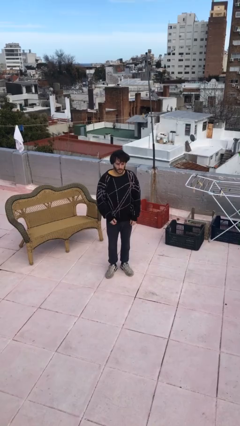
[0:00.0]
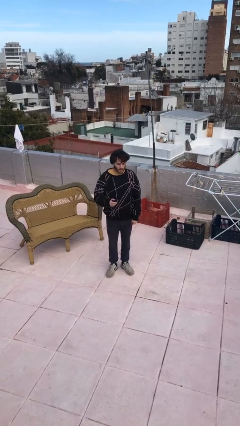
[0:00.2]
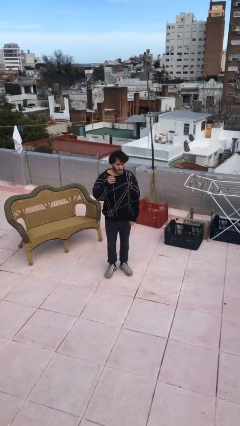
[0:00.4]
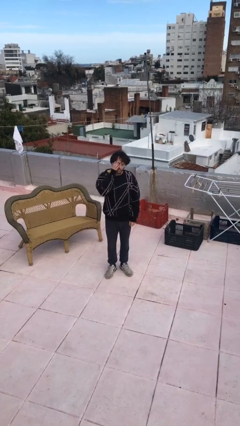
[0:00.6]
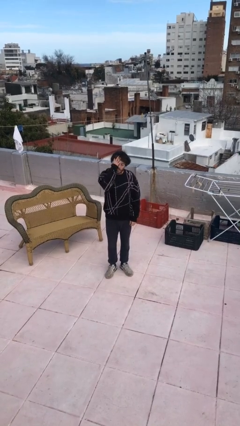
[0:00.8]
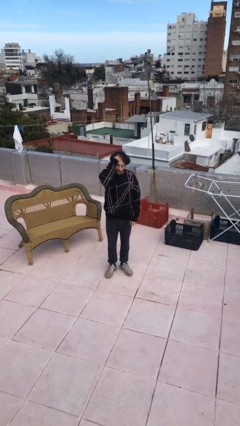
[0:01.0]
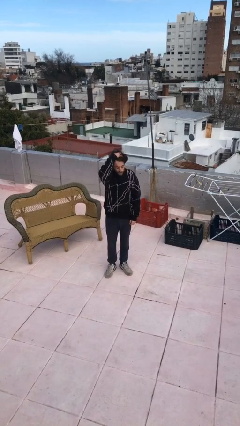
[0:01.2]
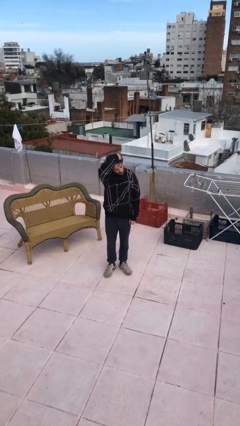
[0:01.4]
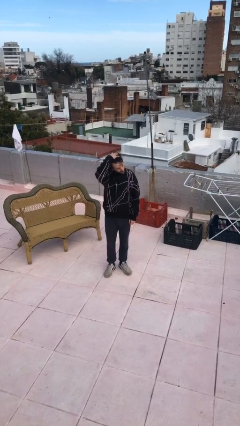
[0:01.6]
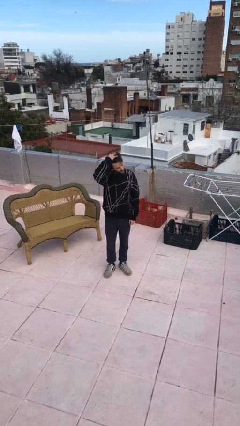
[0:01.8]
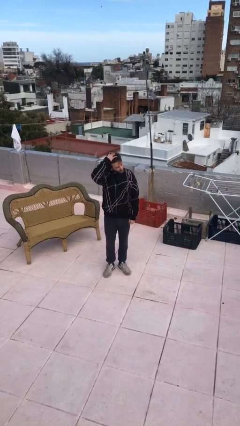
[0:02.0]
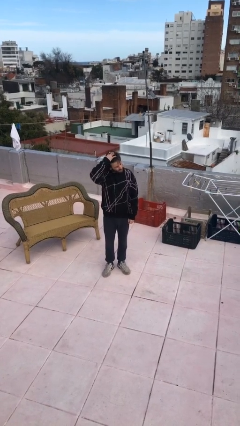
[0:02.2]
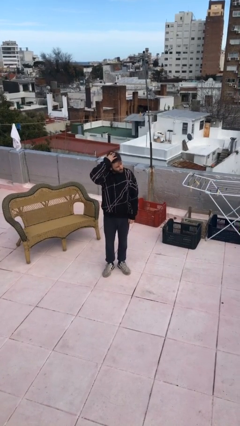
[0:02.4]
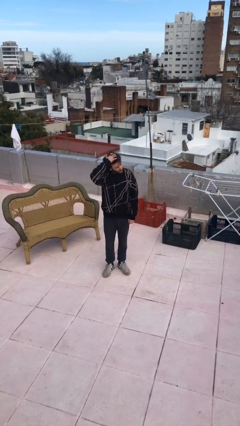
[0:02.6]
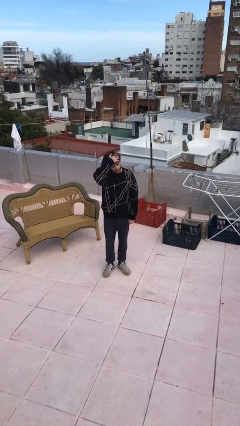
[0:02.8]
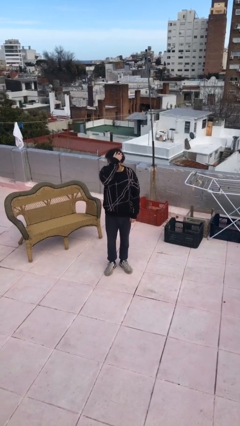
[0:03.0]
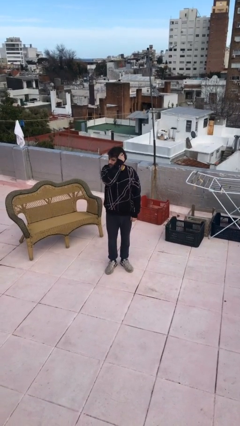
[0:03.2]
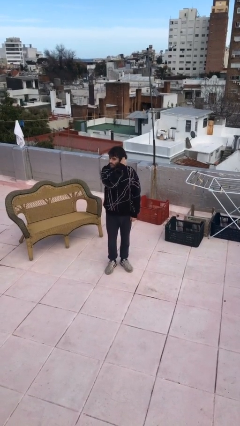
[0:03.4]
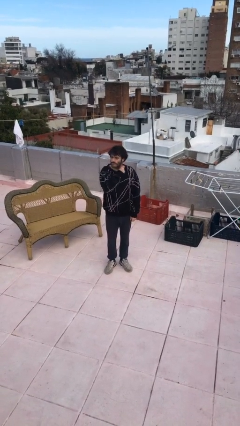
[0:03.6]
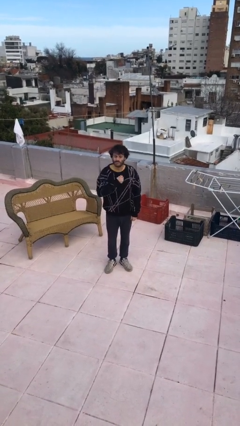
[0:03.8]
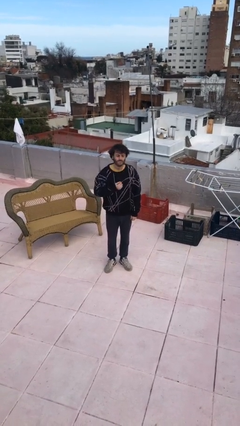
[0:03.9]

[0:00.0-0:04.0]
person scratches face

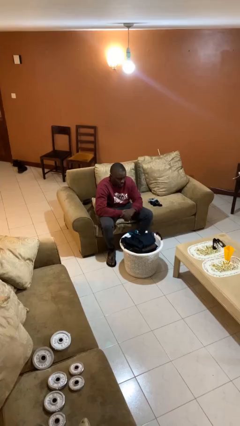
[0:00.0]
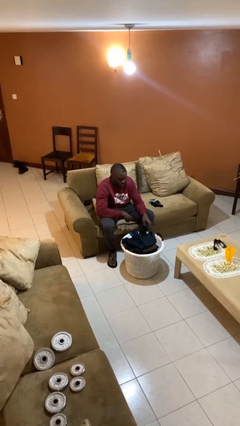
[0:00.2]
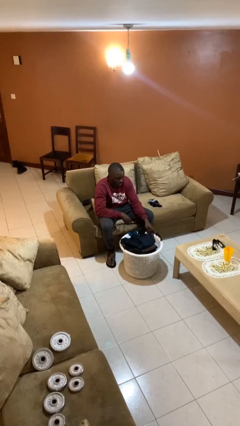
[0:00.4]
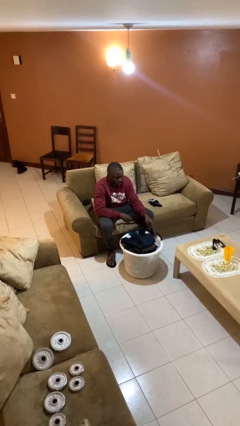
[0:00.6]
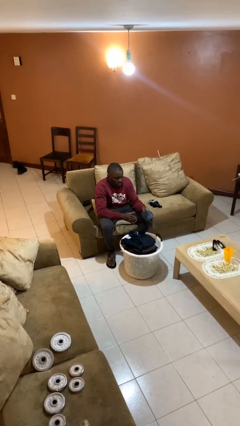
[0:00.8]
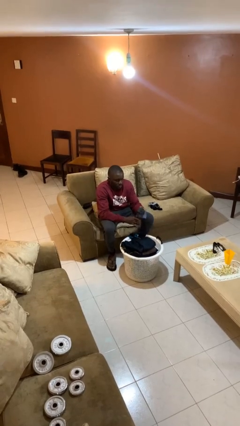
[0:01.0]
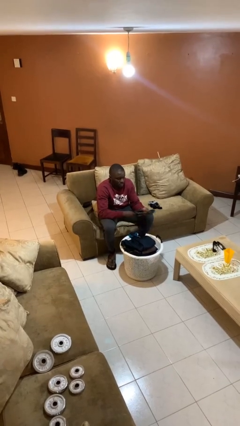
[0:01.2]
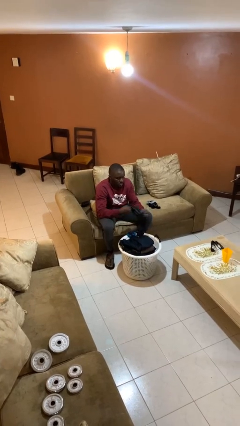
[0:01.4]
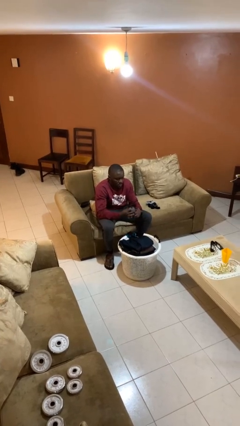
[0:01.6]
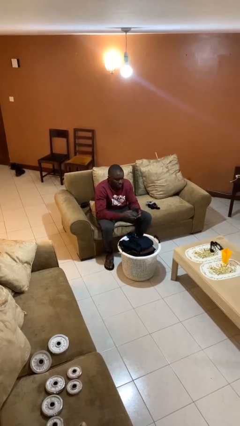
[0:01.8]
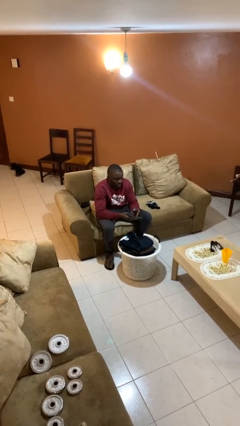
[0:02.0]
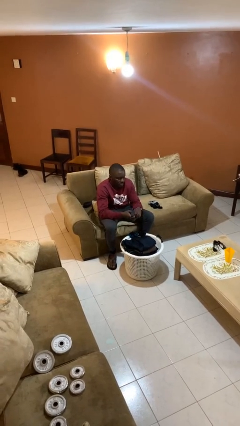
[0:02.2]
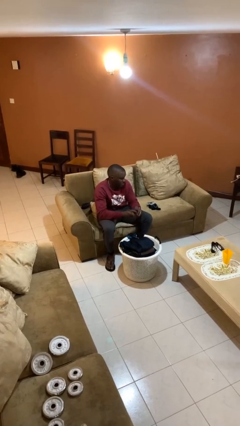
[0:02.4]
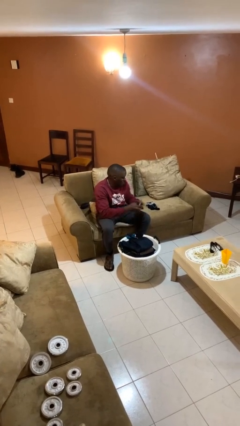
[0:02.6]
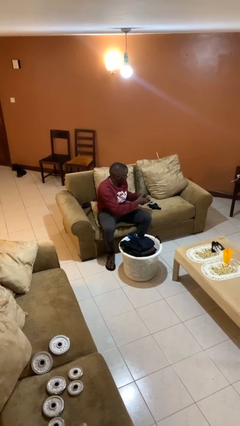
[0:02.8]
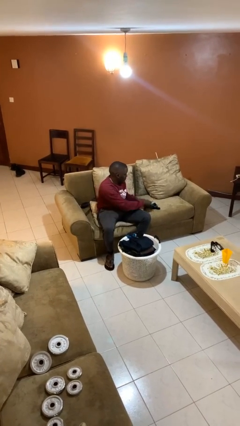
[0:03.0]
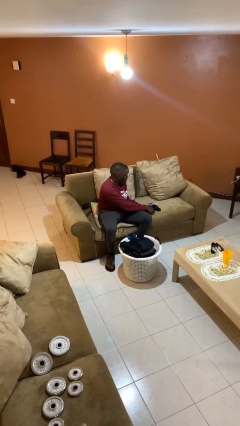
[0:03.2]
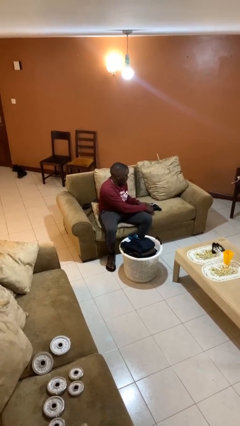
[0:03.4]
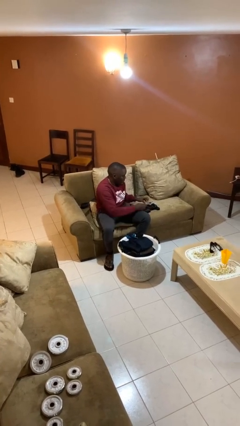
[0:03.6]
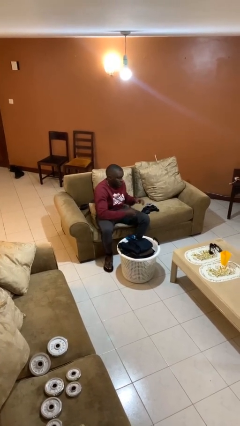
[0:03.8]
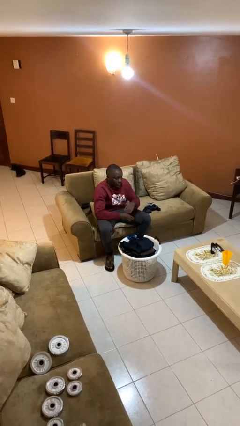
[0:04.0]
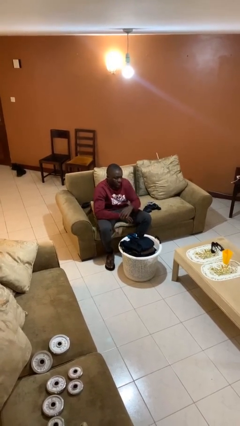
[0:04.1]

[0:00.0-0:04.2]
person folds socks

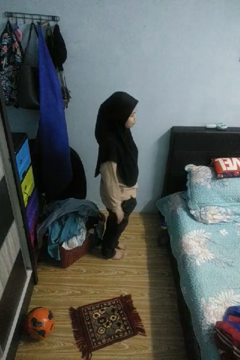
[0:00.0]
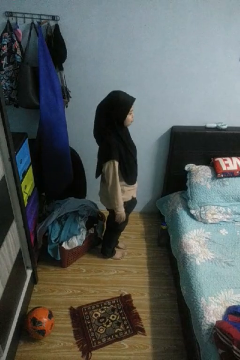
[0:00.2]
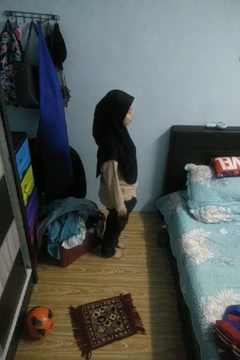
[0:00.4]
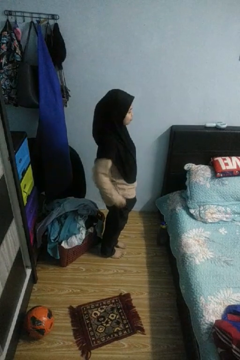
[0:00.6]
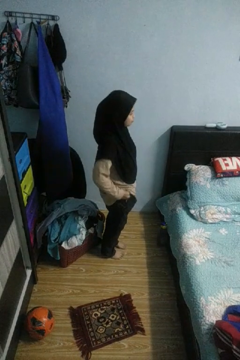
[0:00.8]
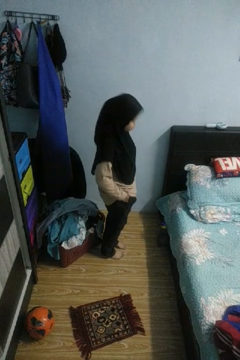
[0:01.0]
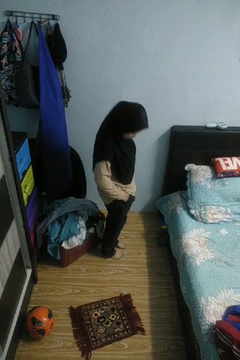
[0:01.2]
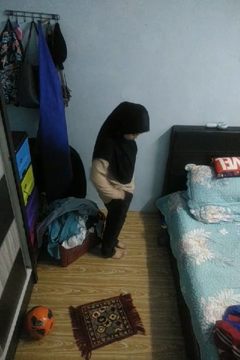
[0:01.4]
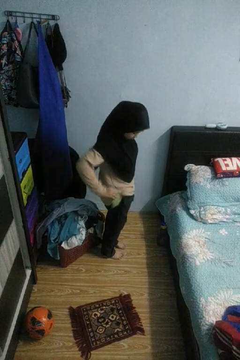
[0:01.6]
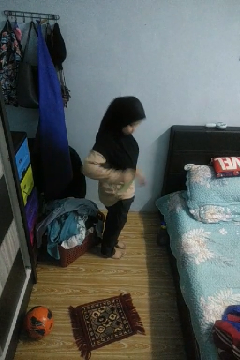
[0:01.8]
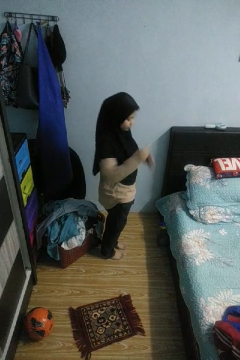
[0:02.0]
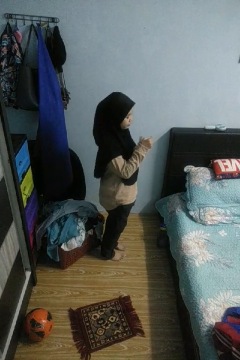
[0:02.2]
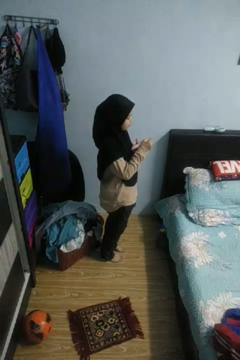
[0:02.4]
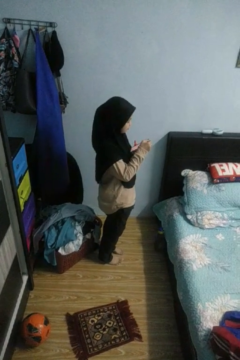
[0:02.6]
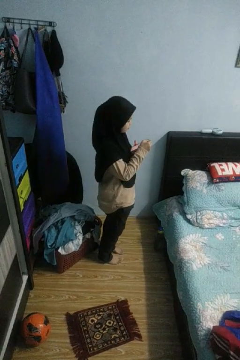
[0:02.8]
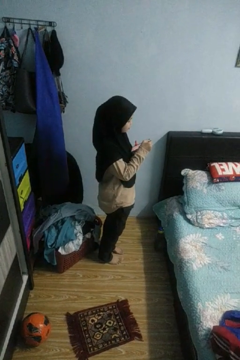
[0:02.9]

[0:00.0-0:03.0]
person takes phone from pocket

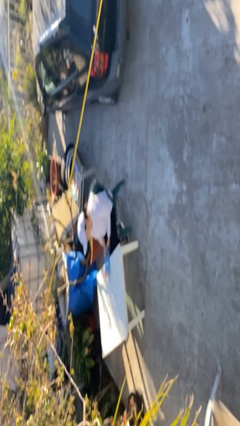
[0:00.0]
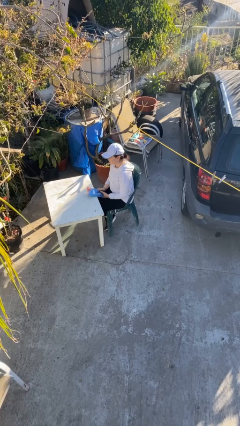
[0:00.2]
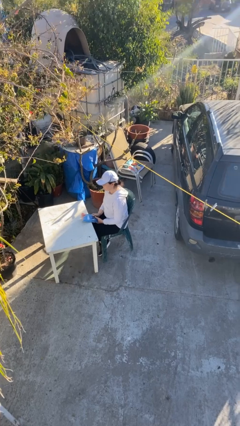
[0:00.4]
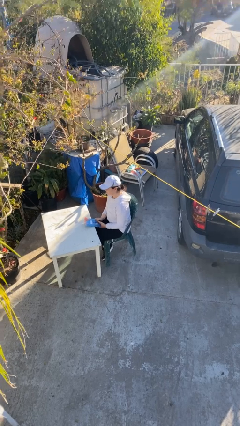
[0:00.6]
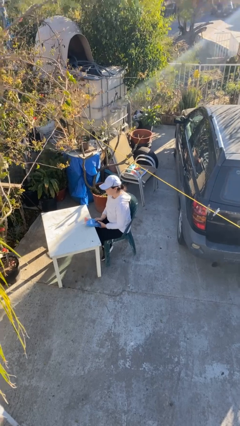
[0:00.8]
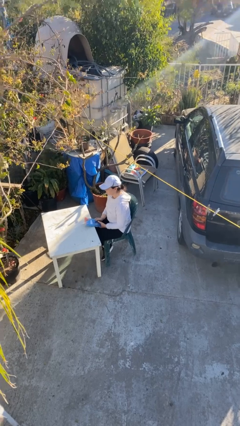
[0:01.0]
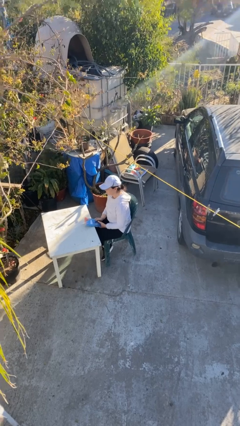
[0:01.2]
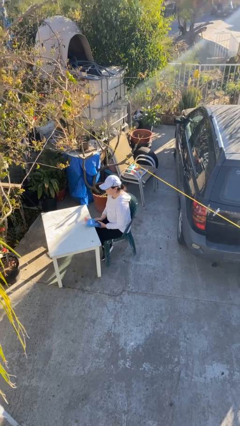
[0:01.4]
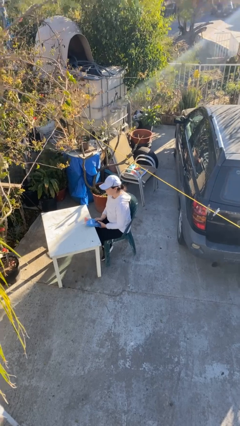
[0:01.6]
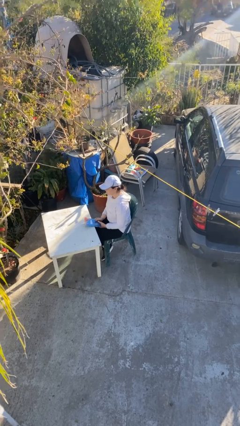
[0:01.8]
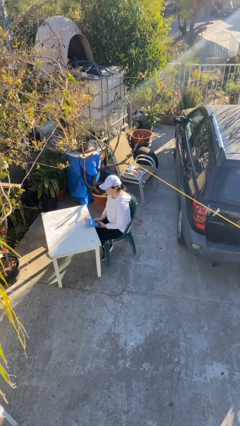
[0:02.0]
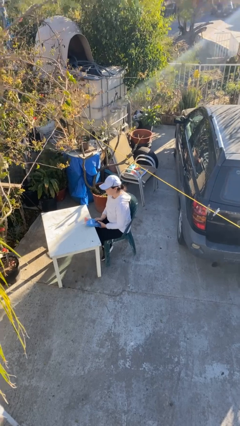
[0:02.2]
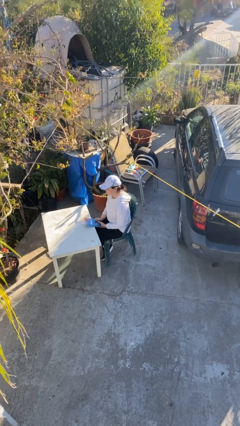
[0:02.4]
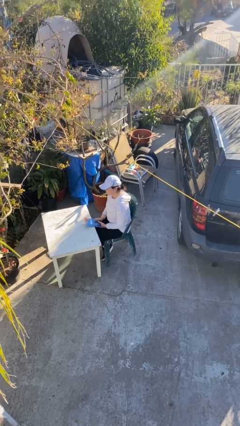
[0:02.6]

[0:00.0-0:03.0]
person reads document

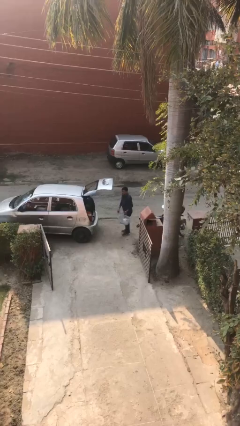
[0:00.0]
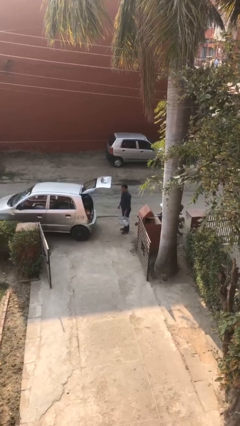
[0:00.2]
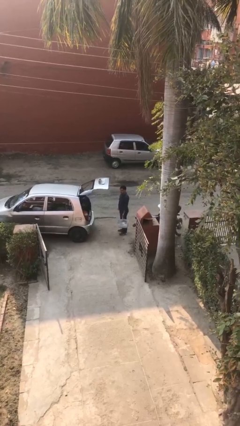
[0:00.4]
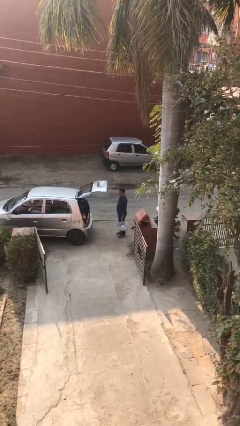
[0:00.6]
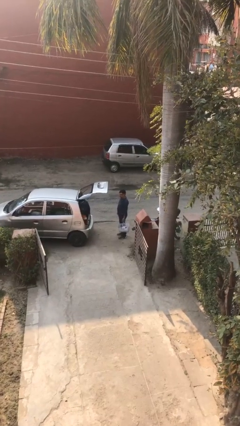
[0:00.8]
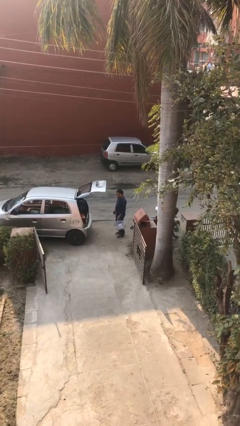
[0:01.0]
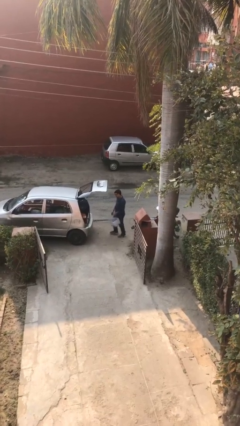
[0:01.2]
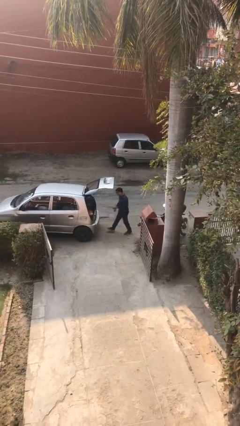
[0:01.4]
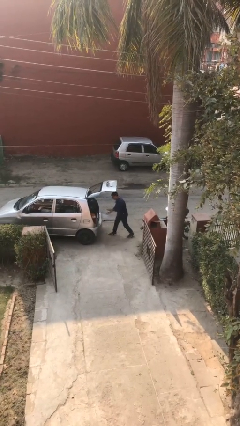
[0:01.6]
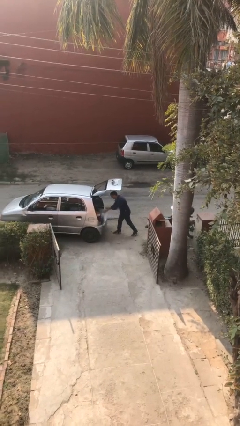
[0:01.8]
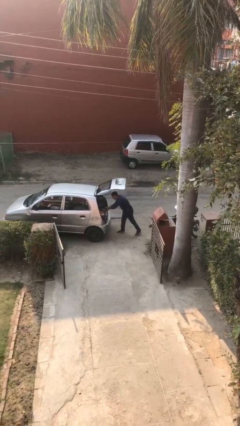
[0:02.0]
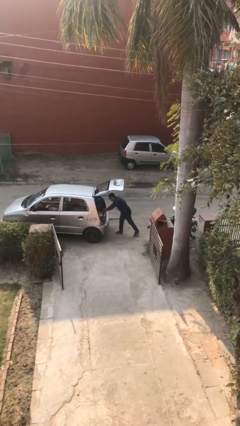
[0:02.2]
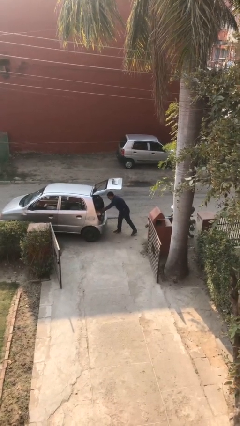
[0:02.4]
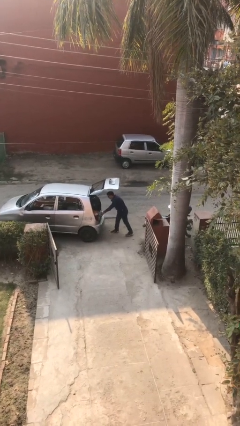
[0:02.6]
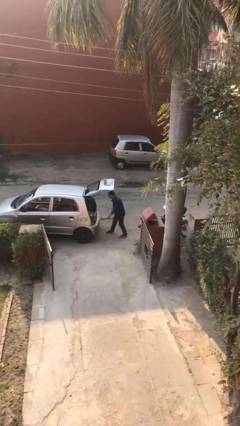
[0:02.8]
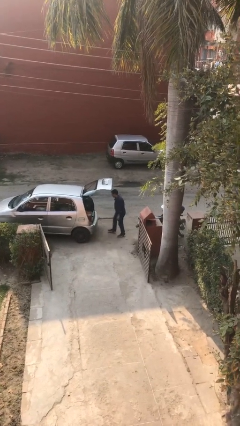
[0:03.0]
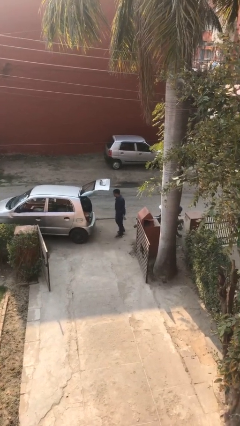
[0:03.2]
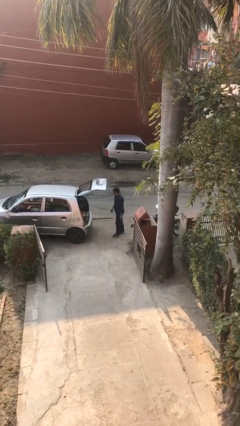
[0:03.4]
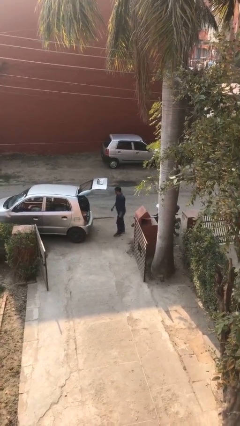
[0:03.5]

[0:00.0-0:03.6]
person loads car

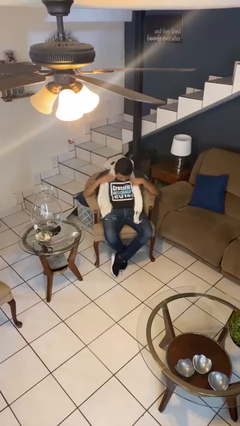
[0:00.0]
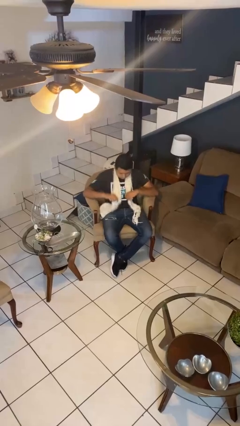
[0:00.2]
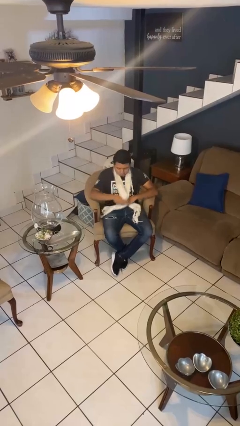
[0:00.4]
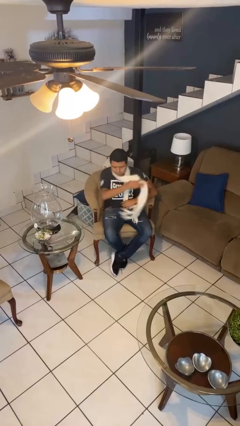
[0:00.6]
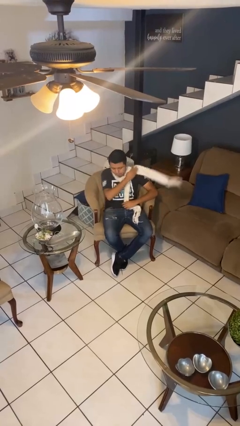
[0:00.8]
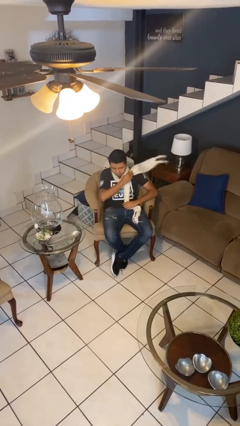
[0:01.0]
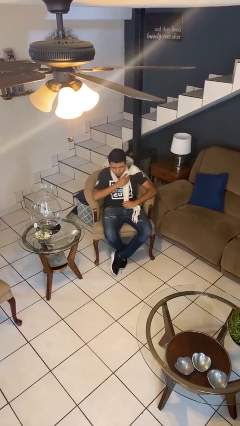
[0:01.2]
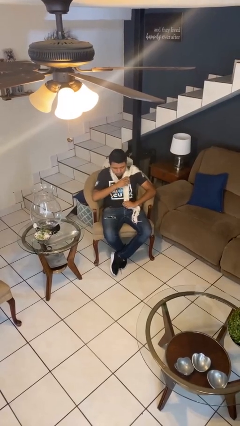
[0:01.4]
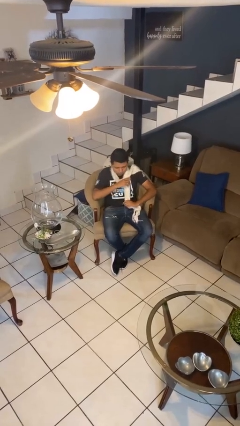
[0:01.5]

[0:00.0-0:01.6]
person puts on scarf
